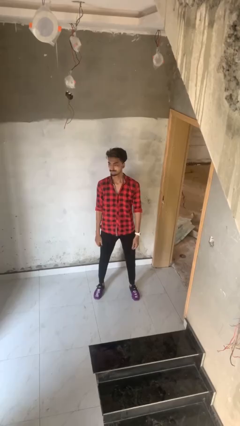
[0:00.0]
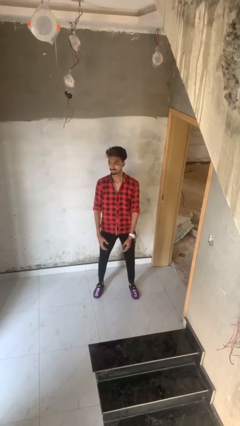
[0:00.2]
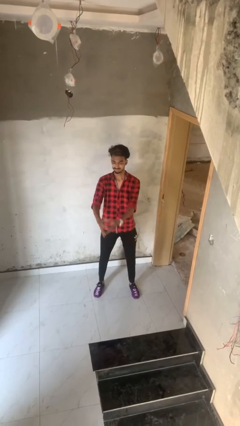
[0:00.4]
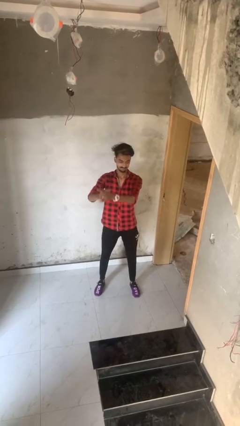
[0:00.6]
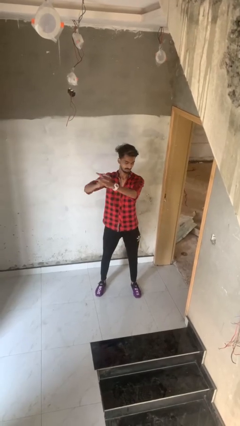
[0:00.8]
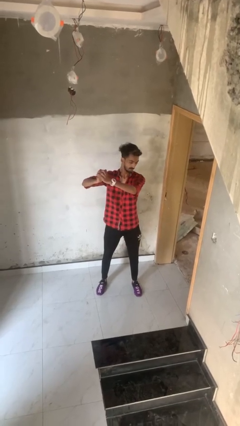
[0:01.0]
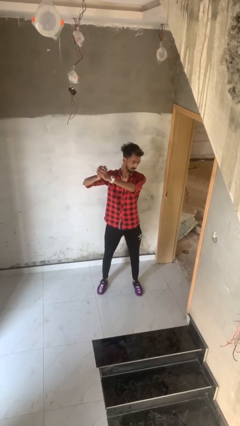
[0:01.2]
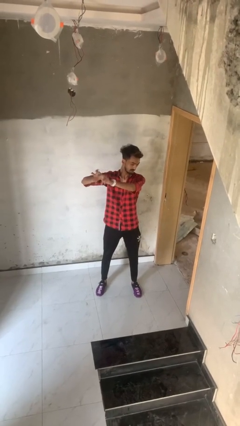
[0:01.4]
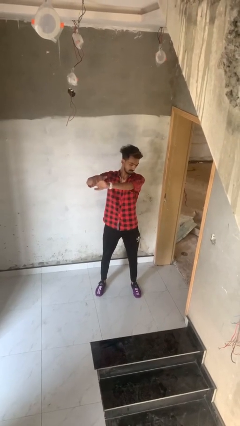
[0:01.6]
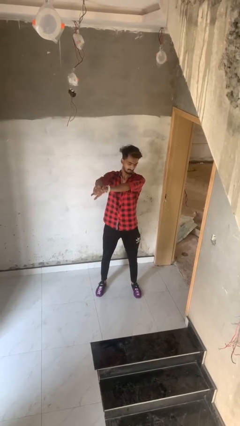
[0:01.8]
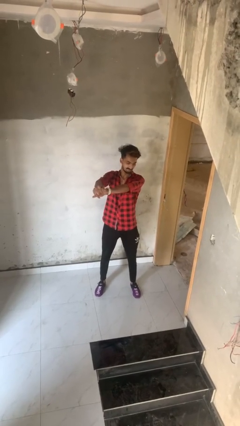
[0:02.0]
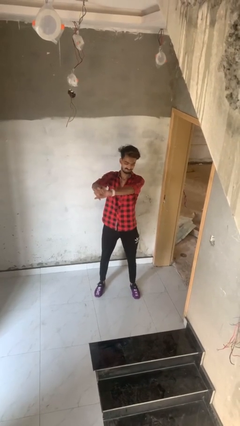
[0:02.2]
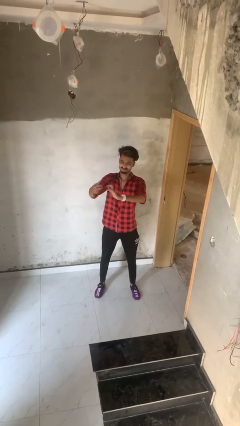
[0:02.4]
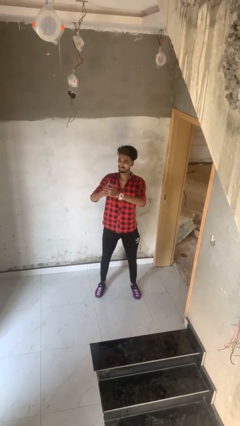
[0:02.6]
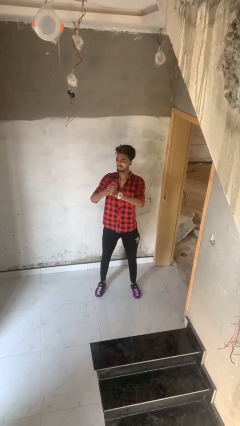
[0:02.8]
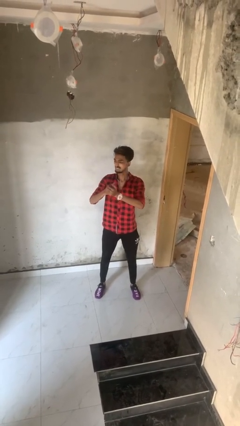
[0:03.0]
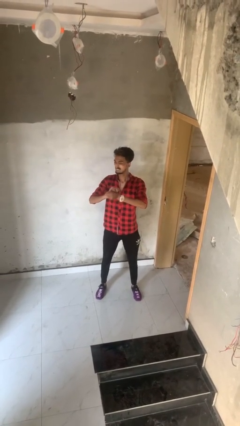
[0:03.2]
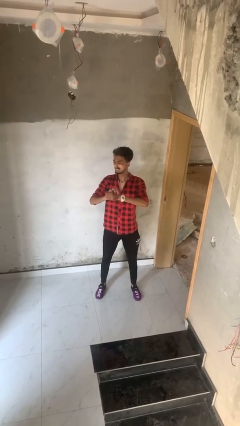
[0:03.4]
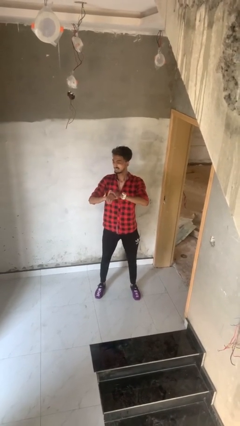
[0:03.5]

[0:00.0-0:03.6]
person cracks knuckles

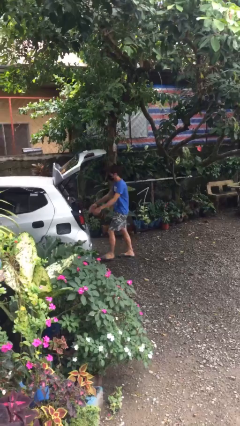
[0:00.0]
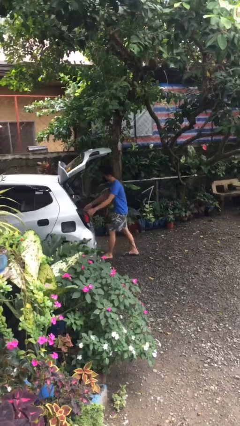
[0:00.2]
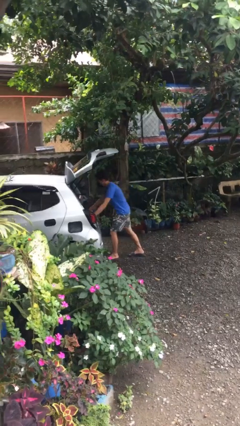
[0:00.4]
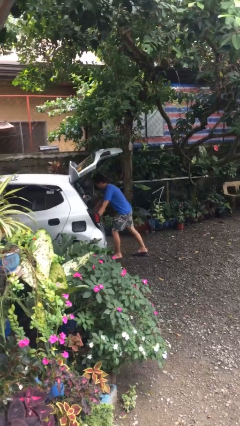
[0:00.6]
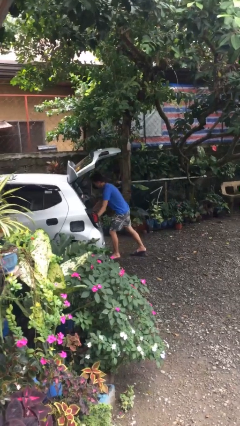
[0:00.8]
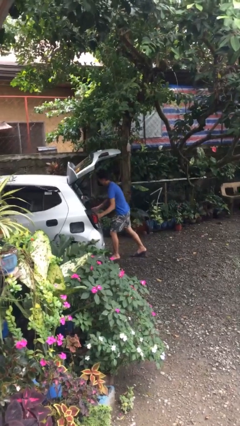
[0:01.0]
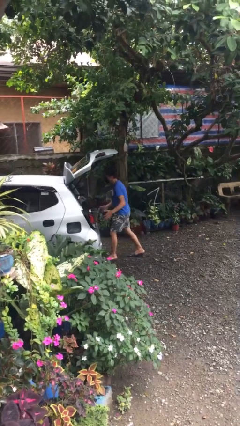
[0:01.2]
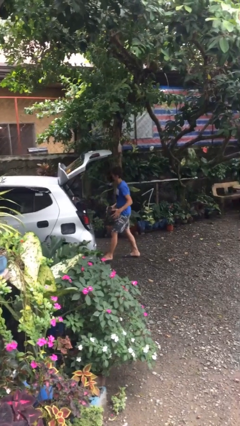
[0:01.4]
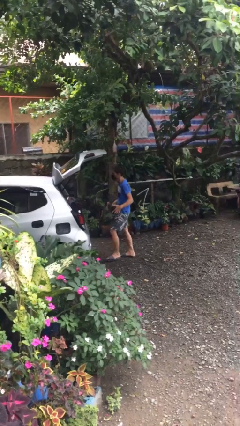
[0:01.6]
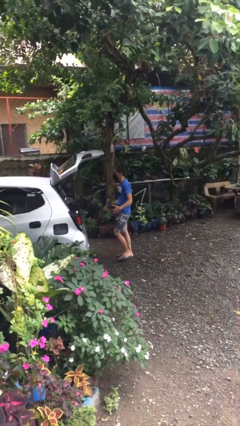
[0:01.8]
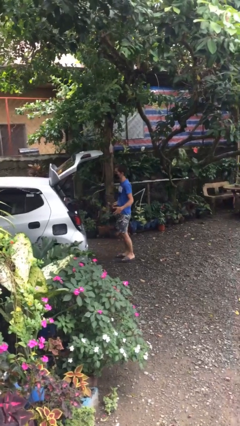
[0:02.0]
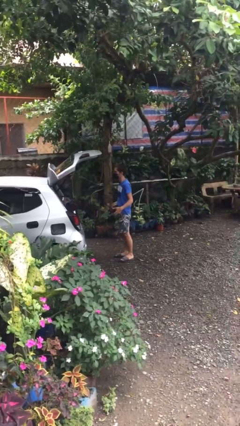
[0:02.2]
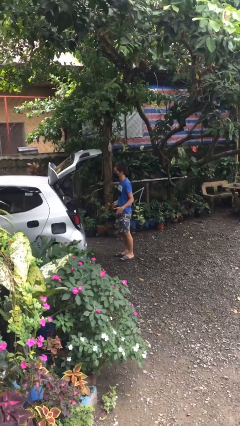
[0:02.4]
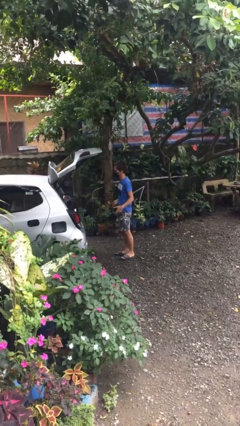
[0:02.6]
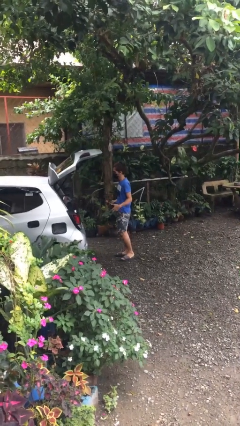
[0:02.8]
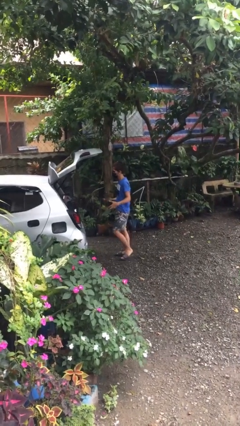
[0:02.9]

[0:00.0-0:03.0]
person unloads car

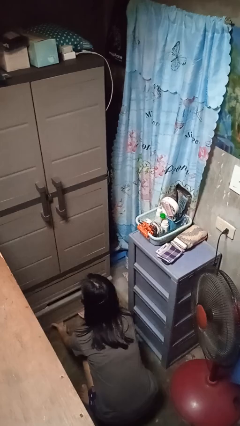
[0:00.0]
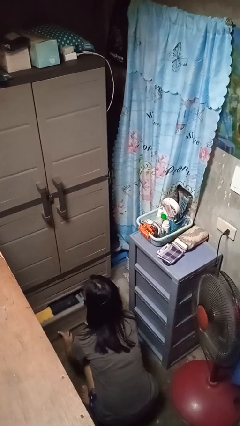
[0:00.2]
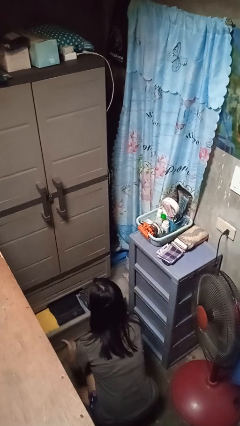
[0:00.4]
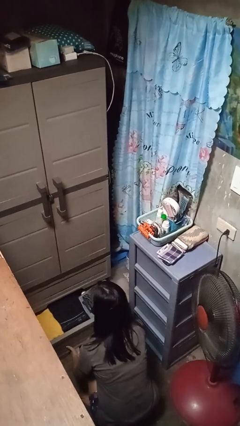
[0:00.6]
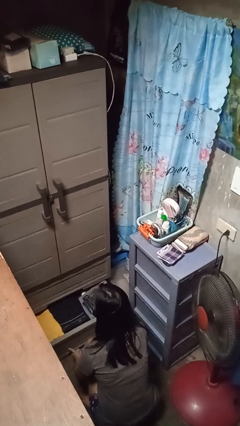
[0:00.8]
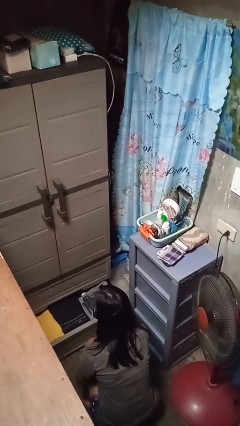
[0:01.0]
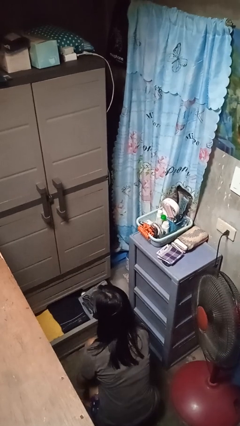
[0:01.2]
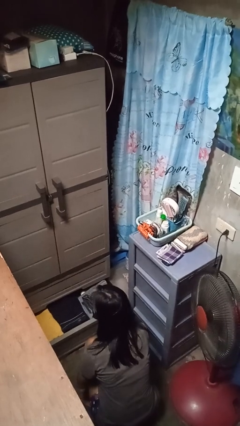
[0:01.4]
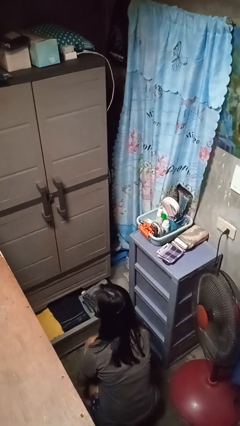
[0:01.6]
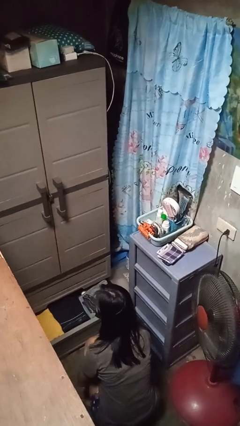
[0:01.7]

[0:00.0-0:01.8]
person opens dresser drawer

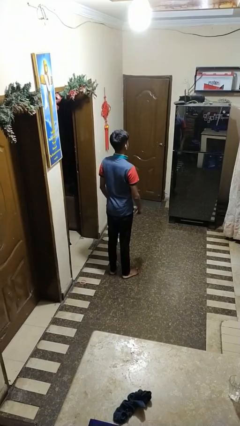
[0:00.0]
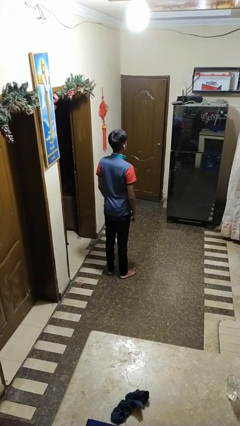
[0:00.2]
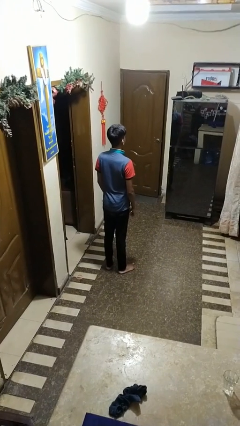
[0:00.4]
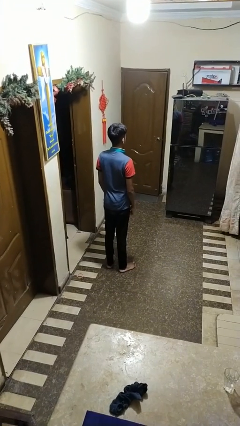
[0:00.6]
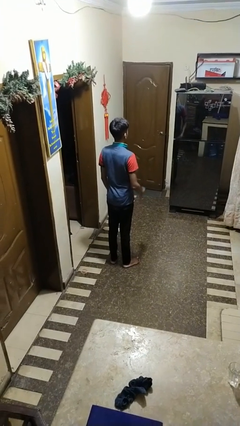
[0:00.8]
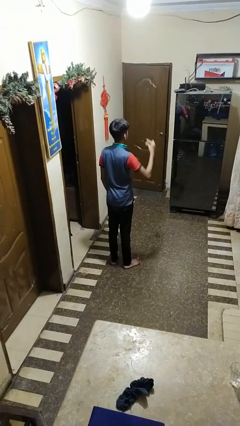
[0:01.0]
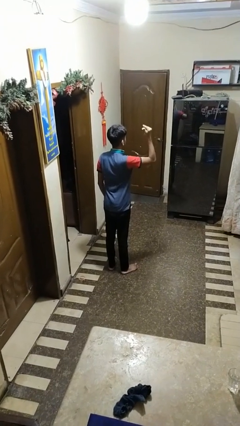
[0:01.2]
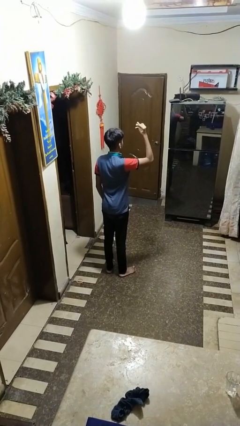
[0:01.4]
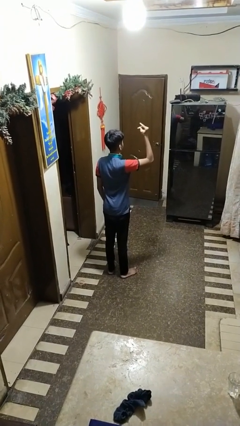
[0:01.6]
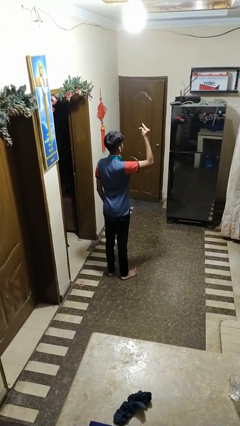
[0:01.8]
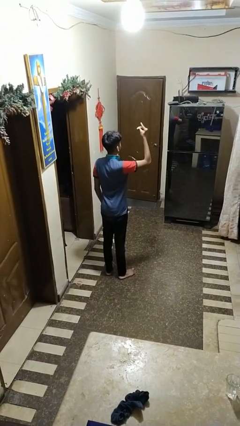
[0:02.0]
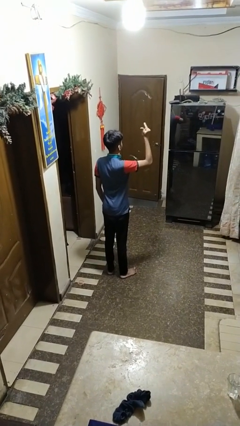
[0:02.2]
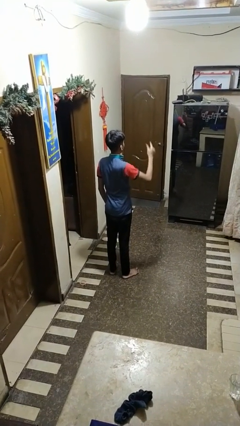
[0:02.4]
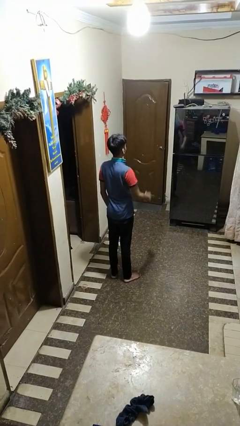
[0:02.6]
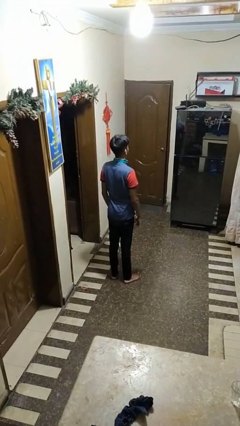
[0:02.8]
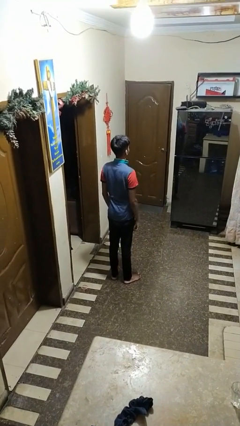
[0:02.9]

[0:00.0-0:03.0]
person snaps fingers

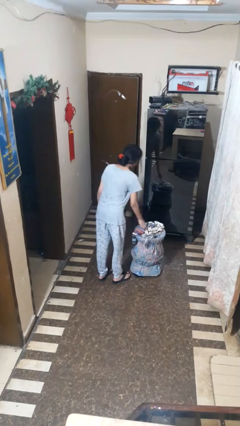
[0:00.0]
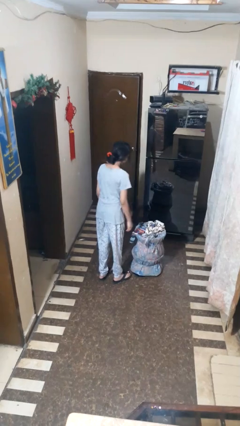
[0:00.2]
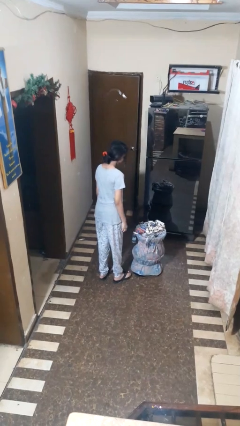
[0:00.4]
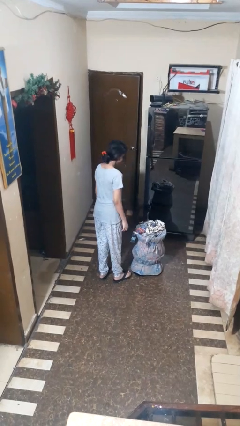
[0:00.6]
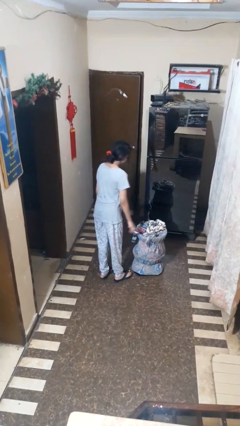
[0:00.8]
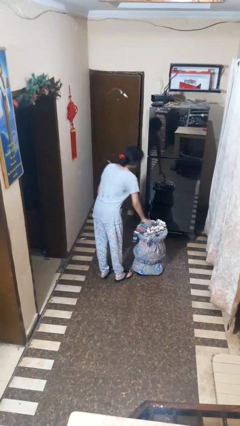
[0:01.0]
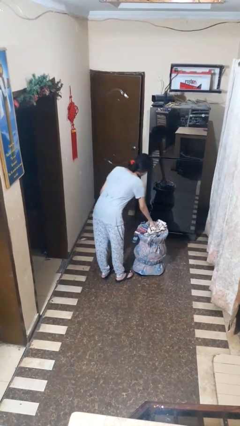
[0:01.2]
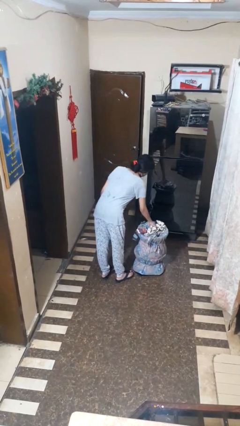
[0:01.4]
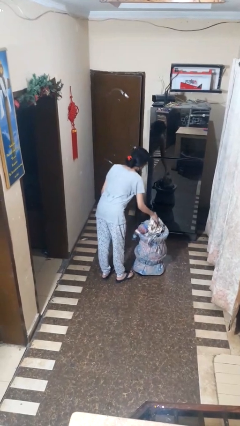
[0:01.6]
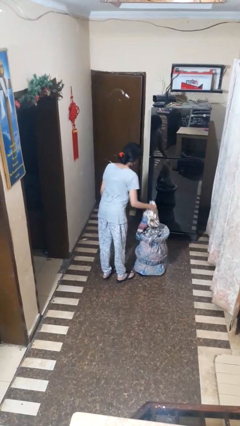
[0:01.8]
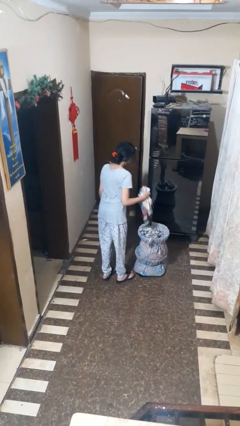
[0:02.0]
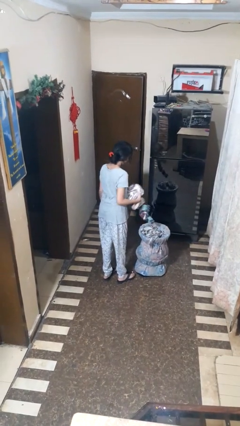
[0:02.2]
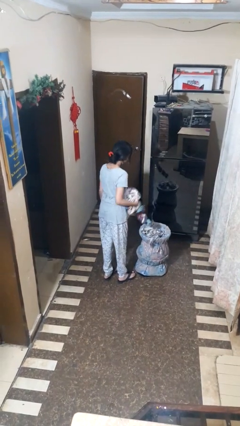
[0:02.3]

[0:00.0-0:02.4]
person takes object from basket

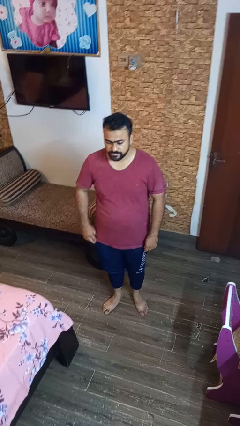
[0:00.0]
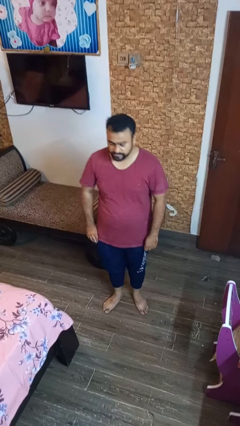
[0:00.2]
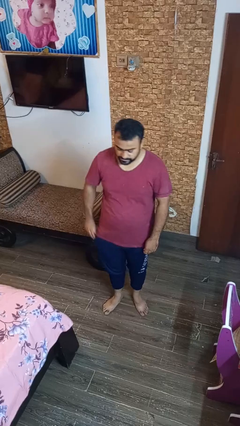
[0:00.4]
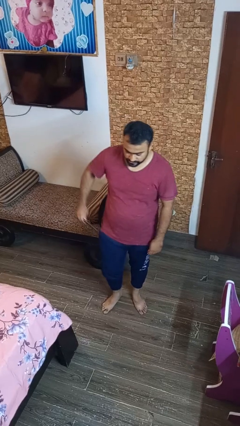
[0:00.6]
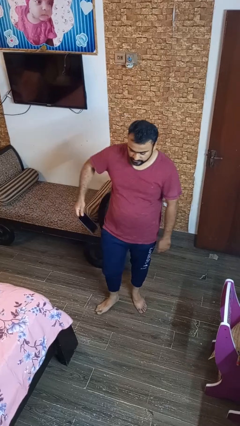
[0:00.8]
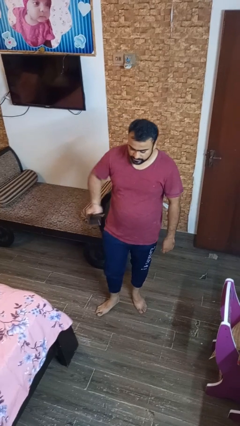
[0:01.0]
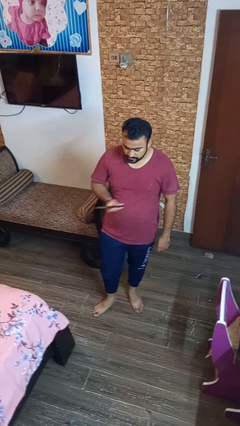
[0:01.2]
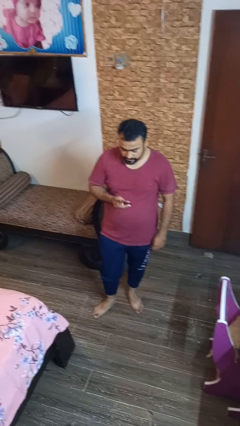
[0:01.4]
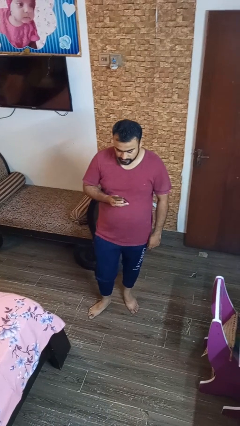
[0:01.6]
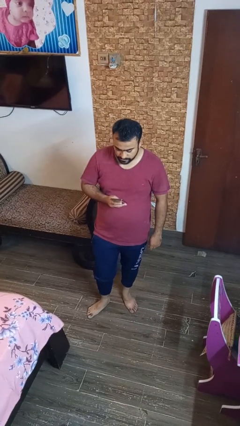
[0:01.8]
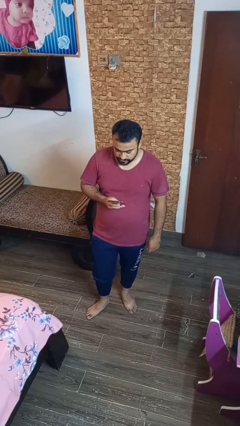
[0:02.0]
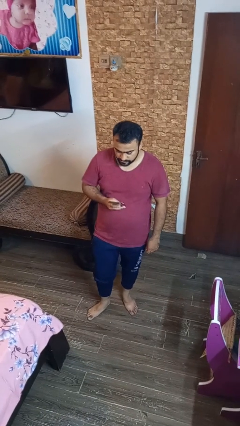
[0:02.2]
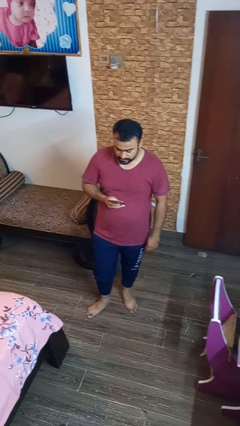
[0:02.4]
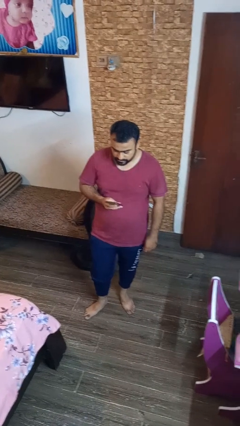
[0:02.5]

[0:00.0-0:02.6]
person takes phone from pocket

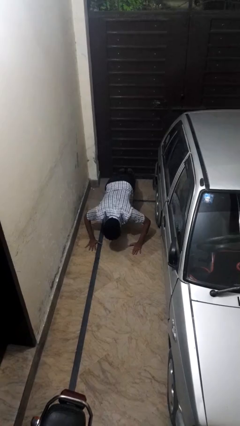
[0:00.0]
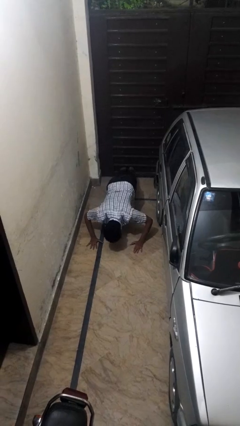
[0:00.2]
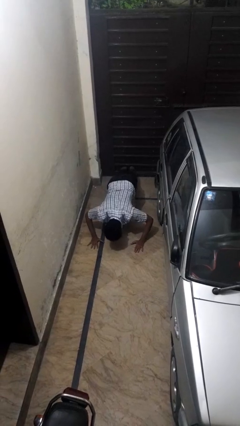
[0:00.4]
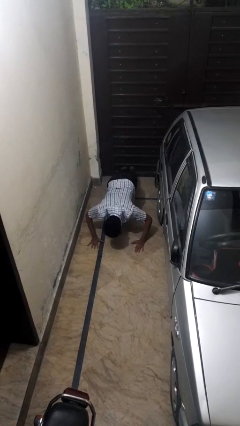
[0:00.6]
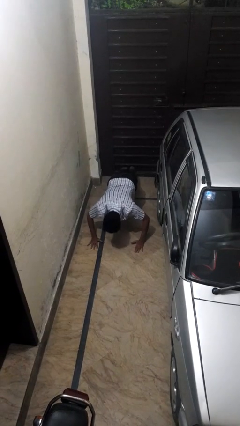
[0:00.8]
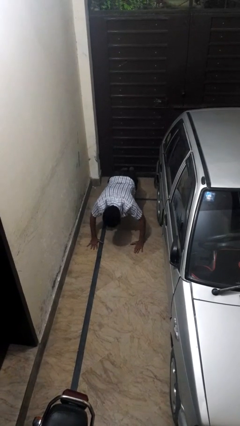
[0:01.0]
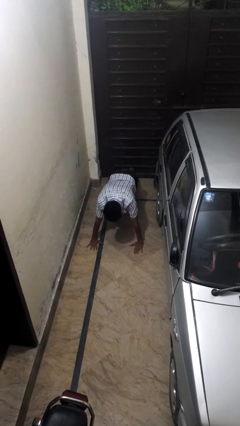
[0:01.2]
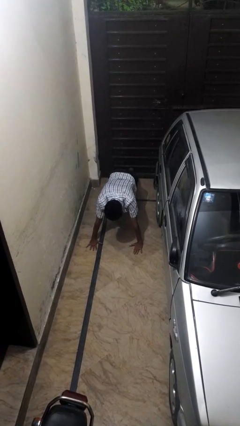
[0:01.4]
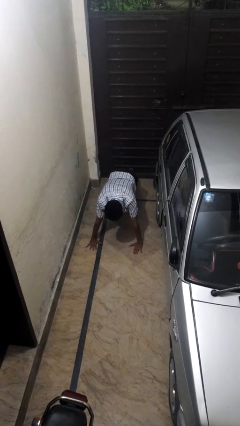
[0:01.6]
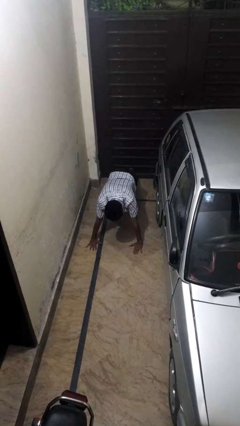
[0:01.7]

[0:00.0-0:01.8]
person exercises with pushup
